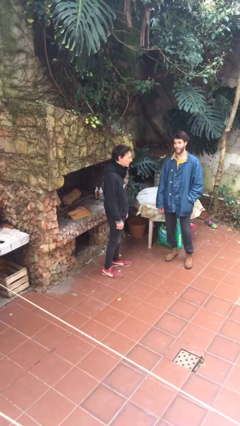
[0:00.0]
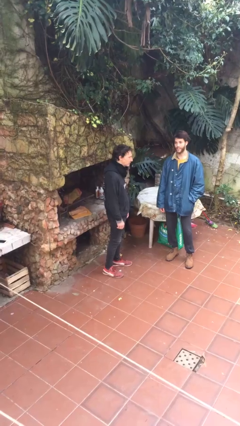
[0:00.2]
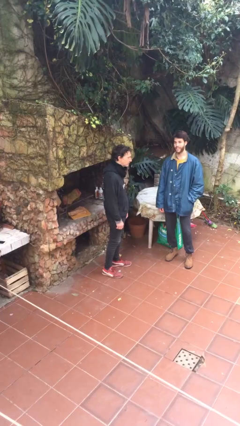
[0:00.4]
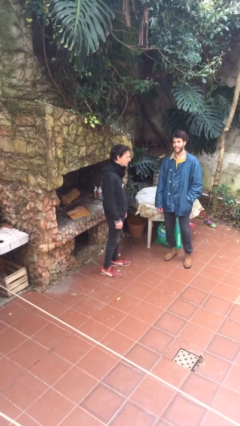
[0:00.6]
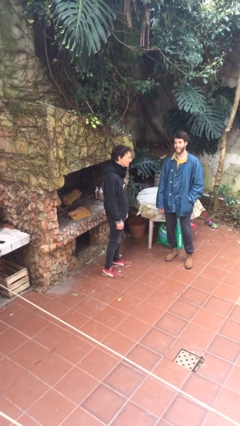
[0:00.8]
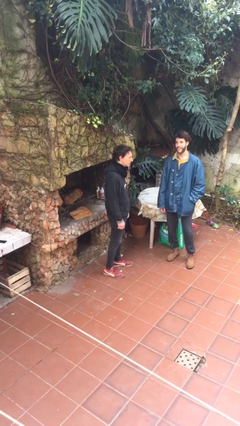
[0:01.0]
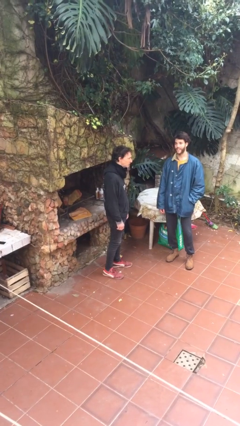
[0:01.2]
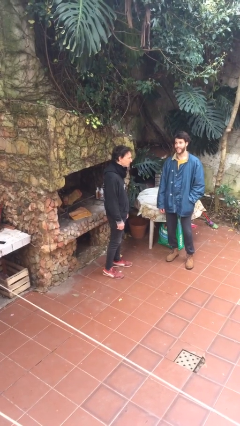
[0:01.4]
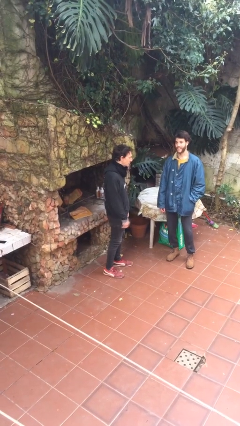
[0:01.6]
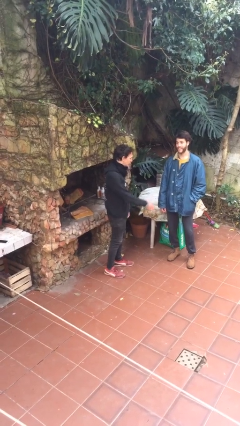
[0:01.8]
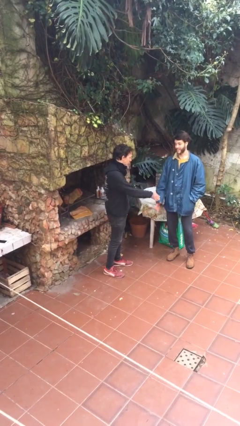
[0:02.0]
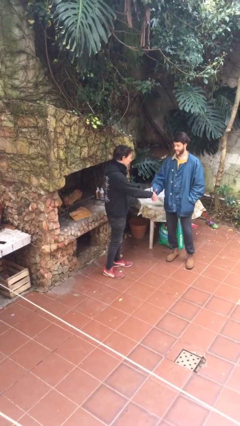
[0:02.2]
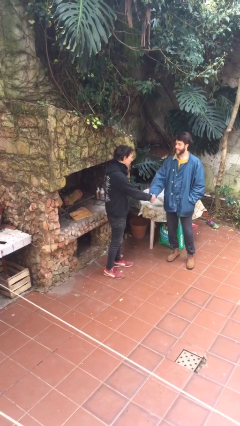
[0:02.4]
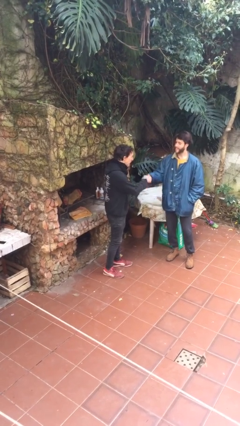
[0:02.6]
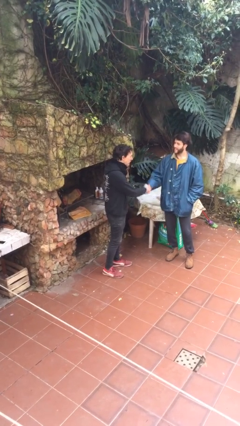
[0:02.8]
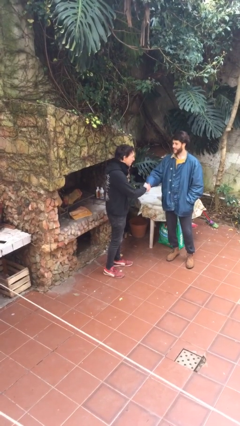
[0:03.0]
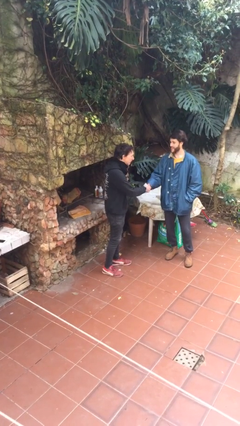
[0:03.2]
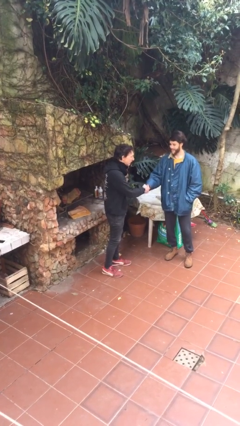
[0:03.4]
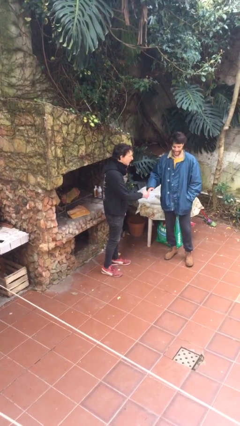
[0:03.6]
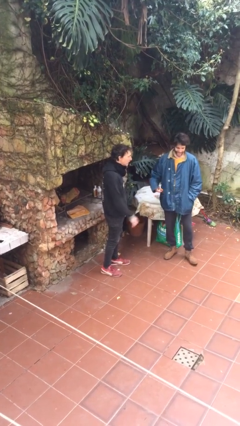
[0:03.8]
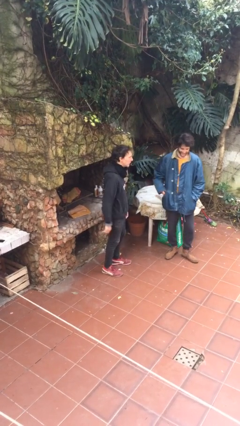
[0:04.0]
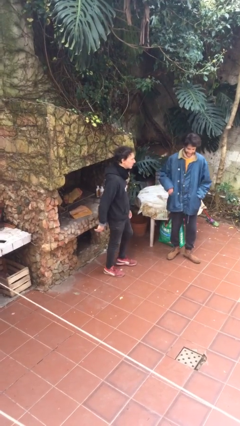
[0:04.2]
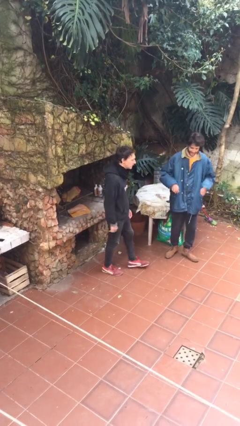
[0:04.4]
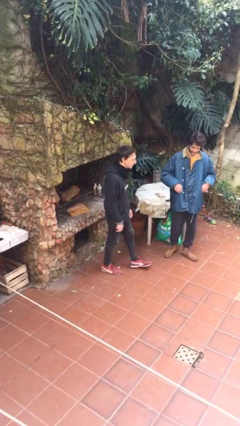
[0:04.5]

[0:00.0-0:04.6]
person shakes hand

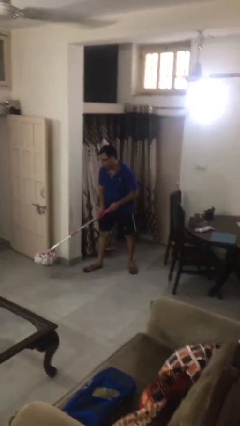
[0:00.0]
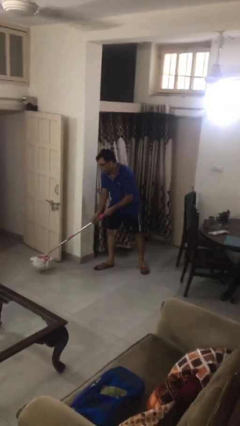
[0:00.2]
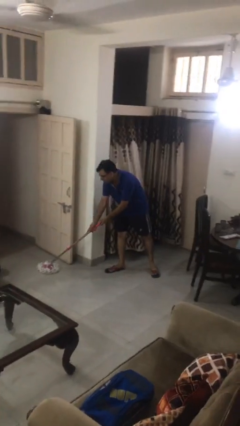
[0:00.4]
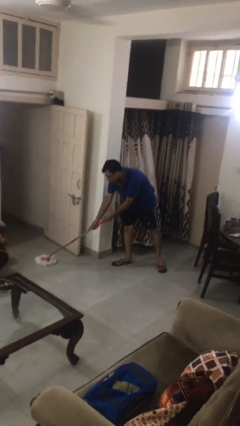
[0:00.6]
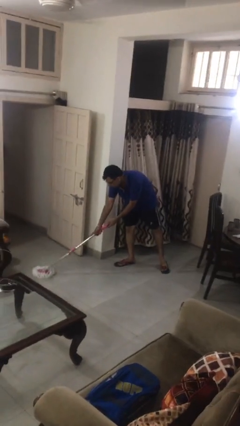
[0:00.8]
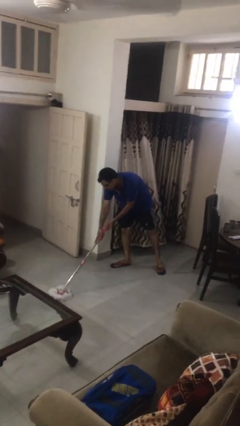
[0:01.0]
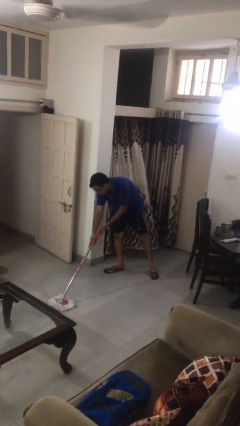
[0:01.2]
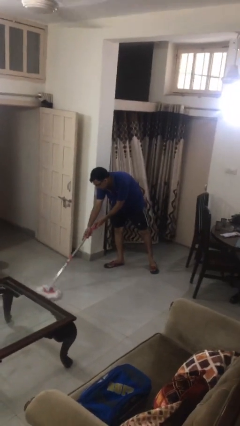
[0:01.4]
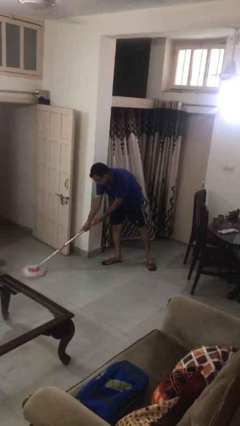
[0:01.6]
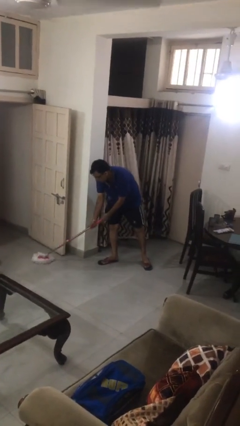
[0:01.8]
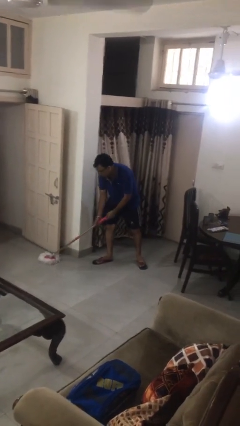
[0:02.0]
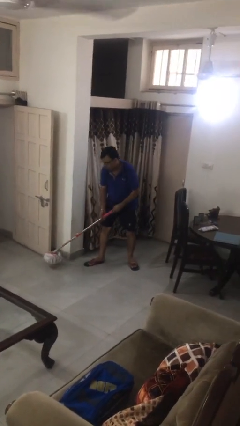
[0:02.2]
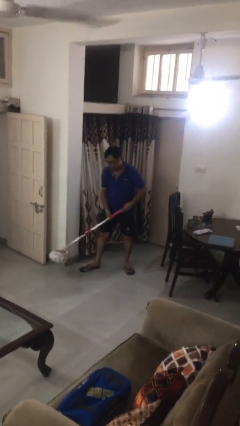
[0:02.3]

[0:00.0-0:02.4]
person mops

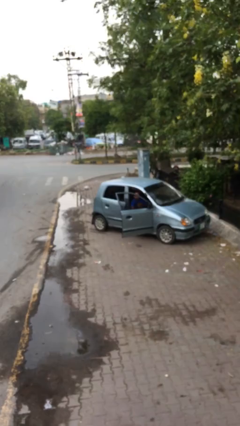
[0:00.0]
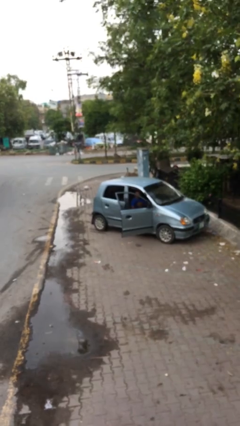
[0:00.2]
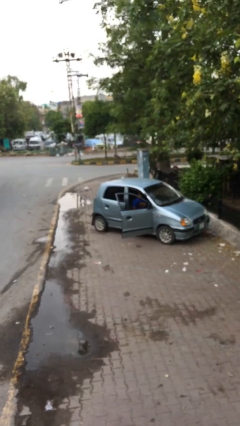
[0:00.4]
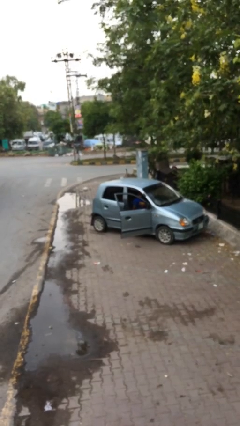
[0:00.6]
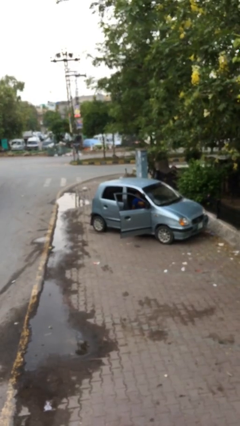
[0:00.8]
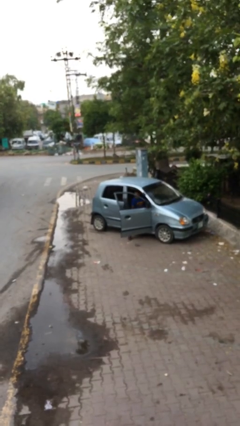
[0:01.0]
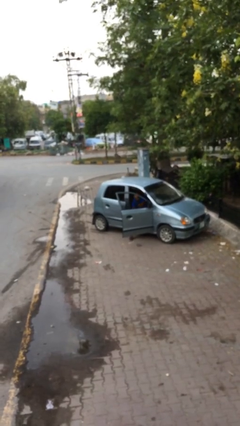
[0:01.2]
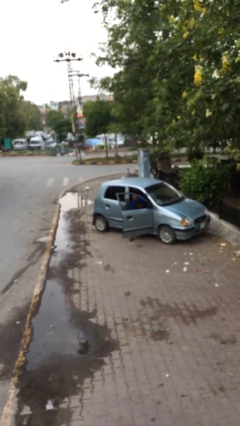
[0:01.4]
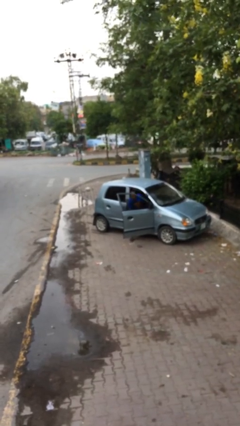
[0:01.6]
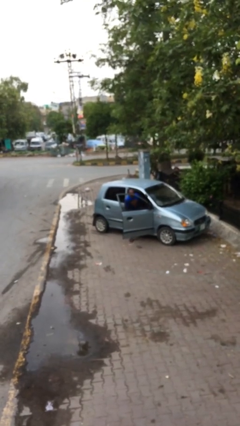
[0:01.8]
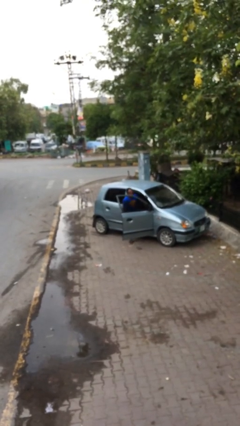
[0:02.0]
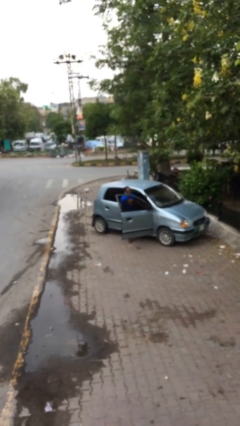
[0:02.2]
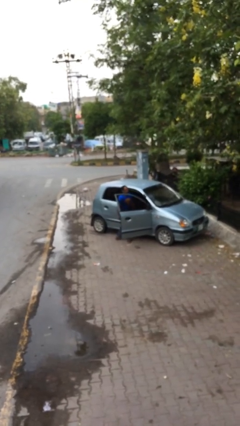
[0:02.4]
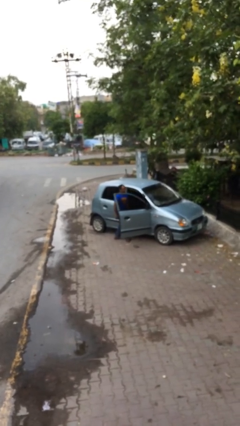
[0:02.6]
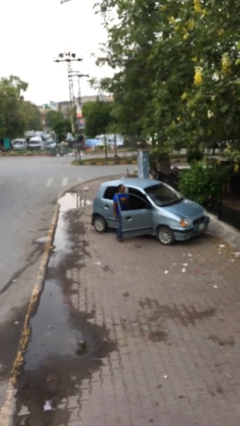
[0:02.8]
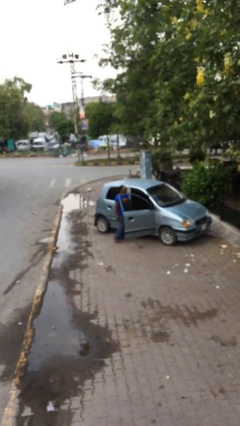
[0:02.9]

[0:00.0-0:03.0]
person exits car

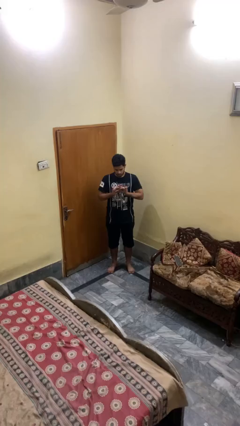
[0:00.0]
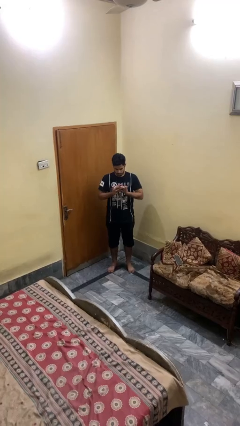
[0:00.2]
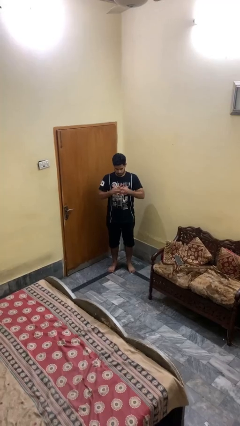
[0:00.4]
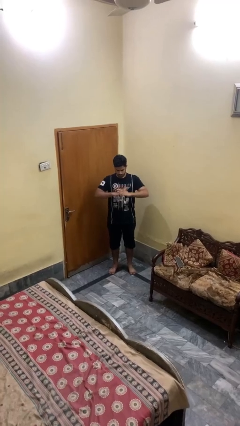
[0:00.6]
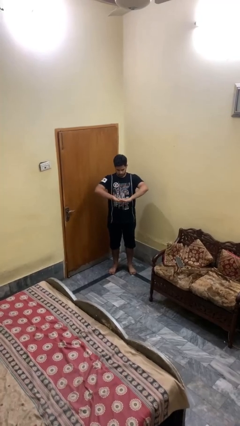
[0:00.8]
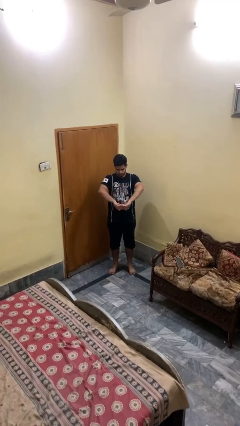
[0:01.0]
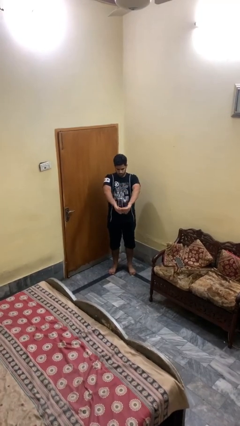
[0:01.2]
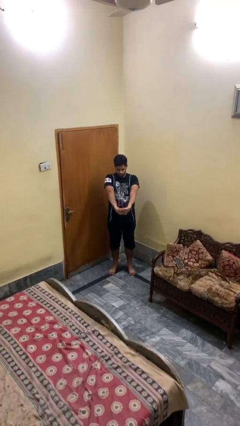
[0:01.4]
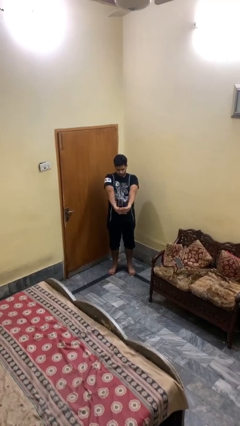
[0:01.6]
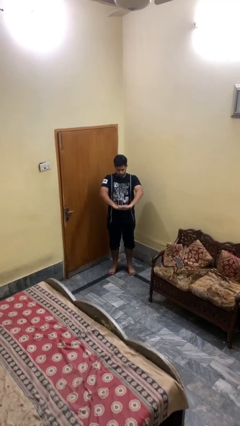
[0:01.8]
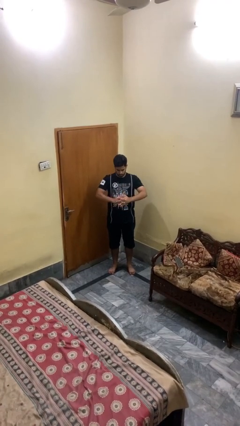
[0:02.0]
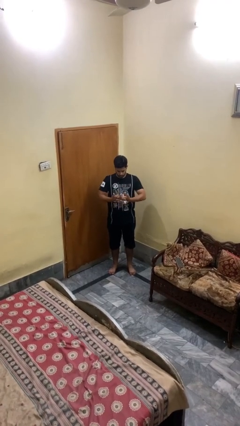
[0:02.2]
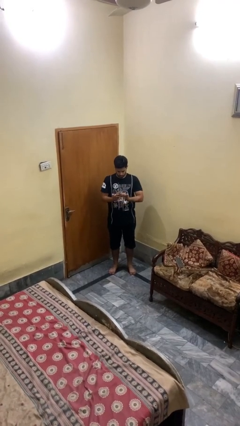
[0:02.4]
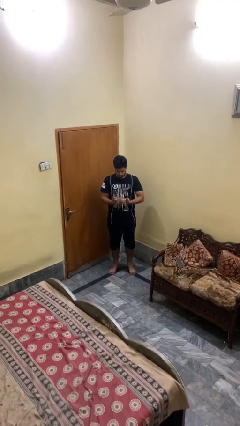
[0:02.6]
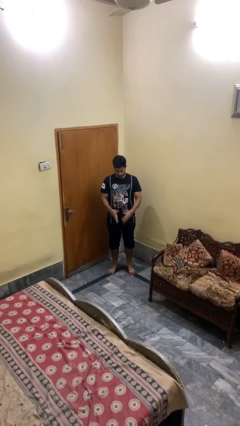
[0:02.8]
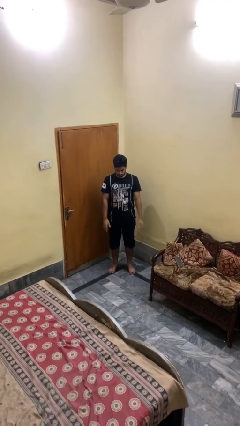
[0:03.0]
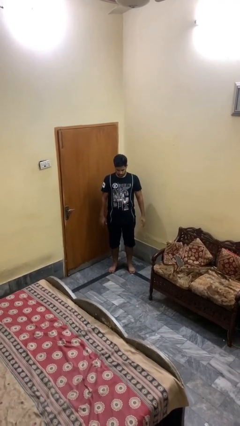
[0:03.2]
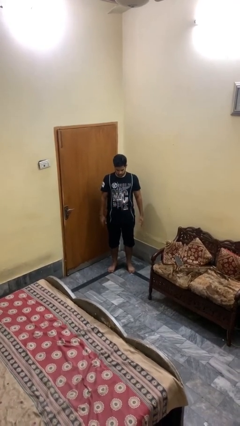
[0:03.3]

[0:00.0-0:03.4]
person cracks knuckles

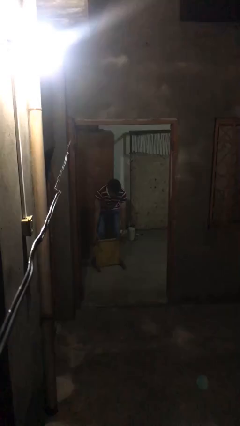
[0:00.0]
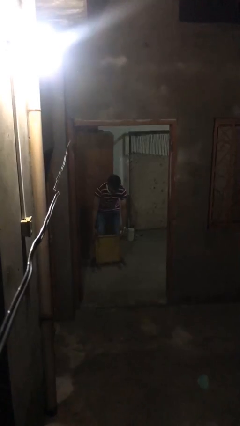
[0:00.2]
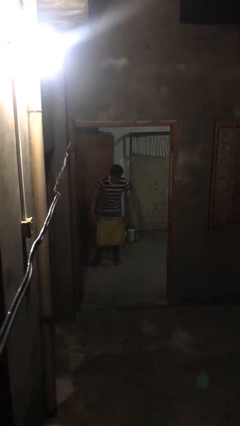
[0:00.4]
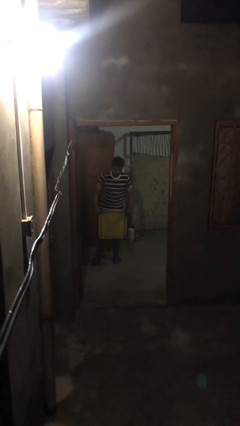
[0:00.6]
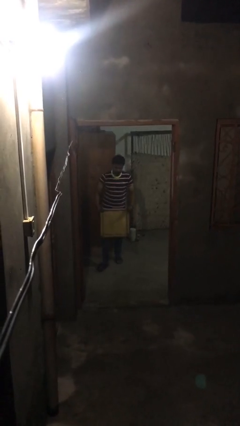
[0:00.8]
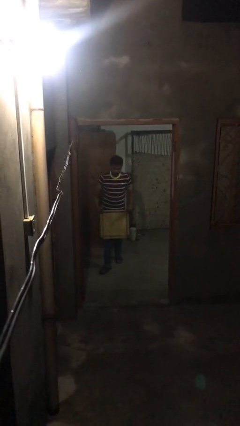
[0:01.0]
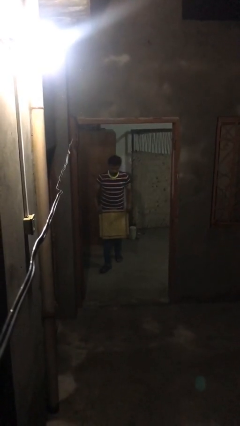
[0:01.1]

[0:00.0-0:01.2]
person picks up object from floor

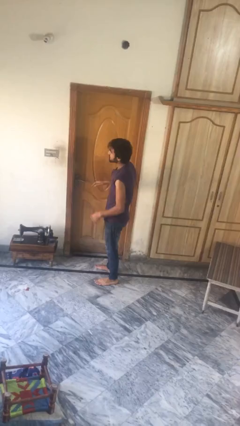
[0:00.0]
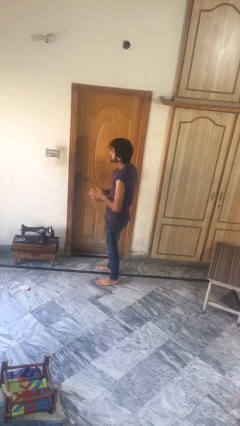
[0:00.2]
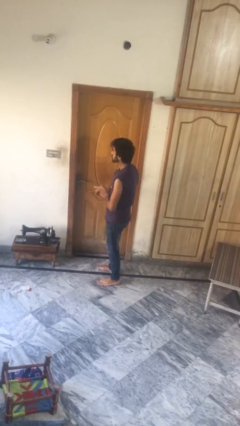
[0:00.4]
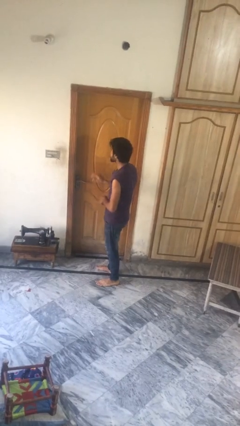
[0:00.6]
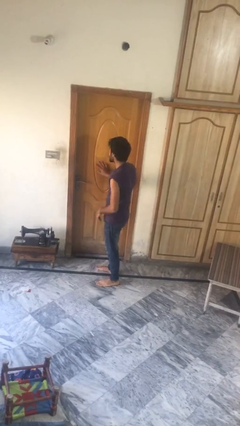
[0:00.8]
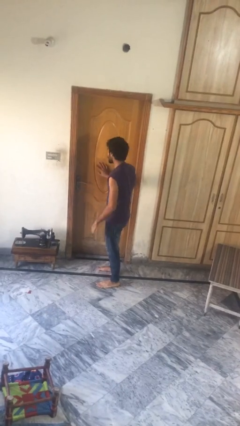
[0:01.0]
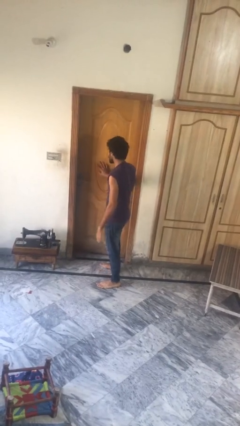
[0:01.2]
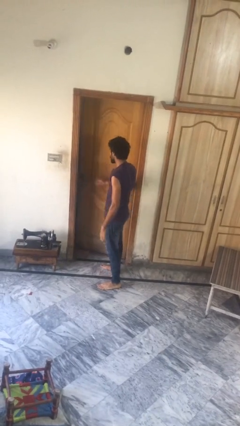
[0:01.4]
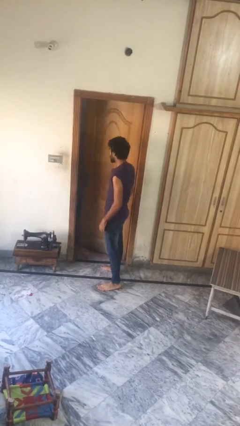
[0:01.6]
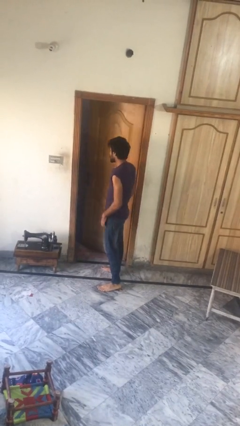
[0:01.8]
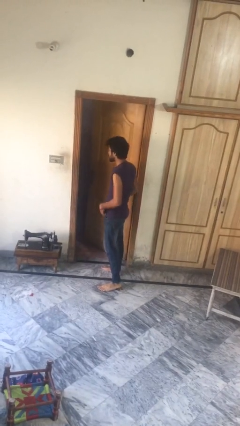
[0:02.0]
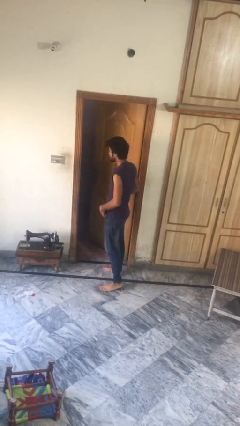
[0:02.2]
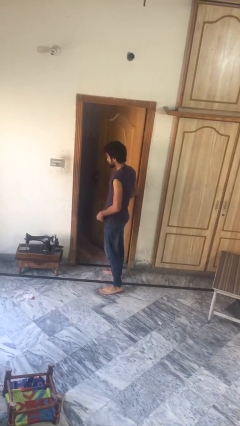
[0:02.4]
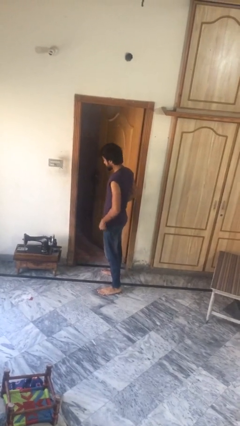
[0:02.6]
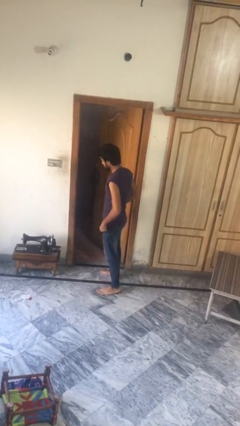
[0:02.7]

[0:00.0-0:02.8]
person opens facility door

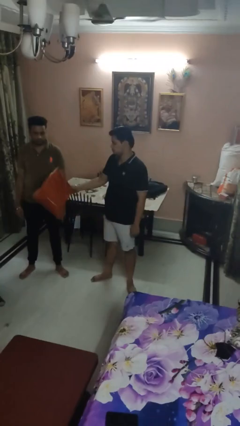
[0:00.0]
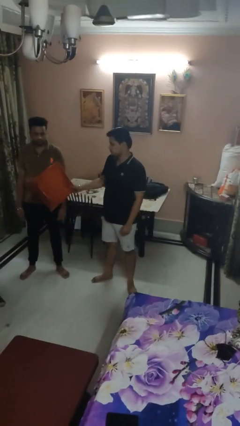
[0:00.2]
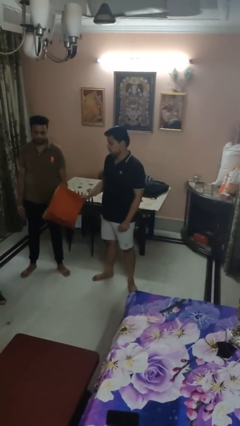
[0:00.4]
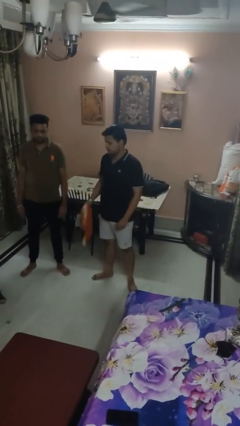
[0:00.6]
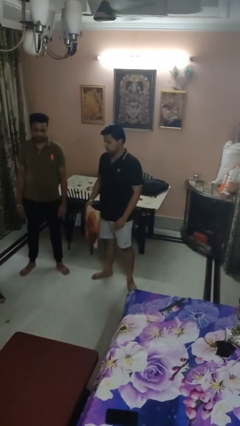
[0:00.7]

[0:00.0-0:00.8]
person hits person with pillow
